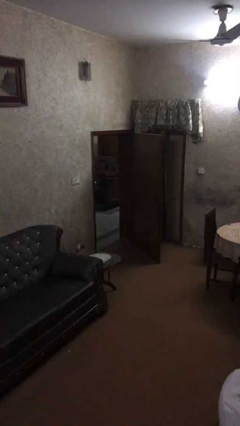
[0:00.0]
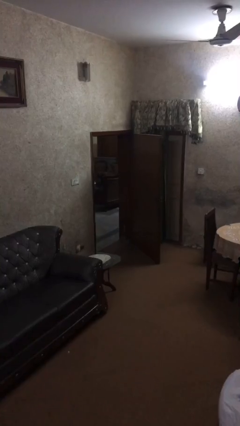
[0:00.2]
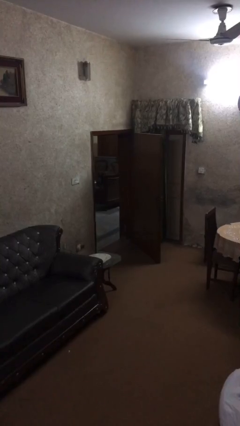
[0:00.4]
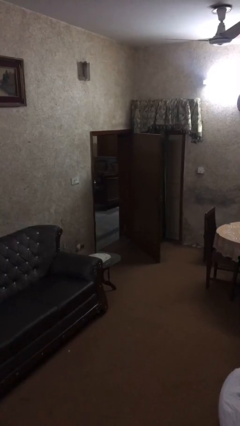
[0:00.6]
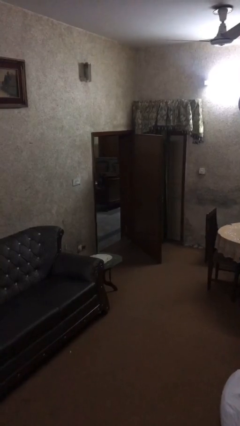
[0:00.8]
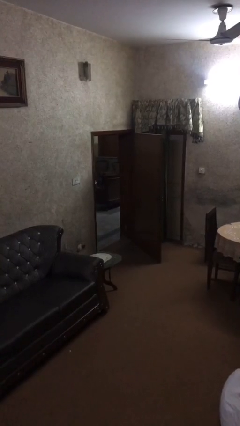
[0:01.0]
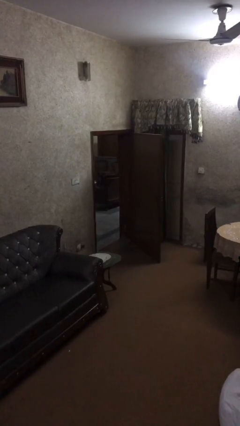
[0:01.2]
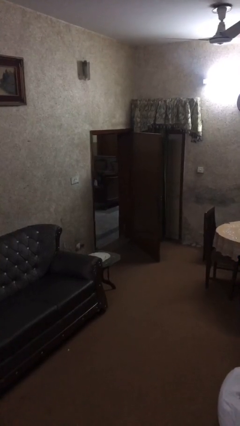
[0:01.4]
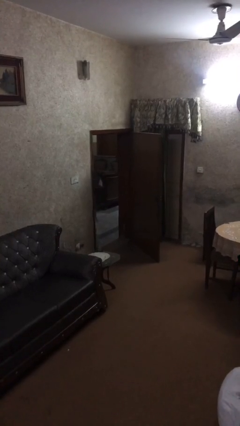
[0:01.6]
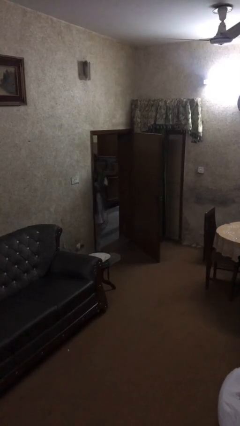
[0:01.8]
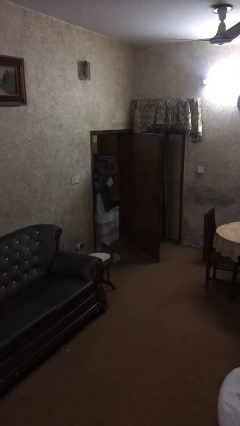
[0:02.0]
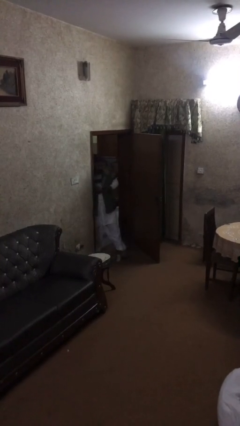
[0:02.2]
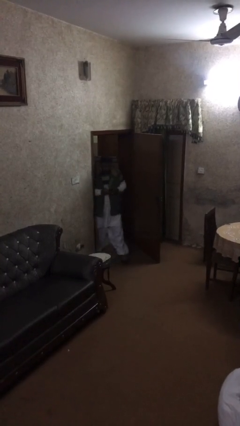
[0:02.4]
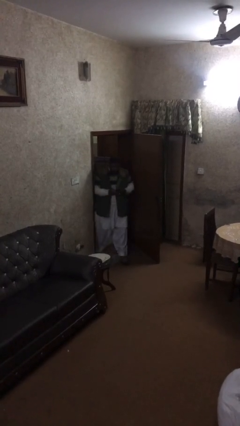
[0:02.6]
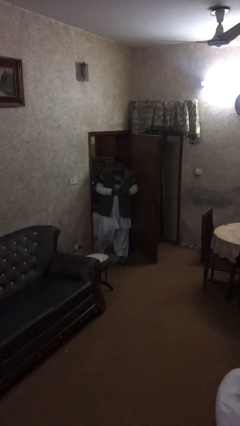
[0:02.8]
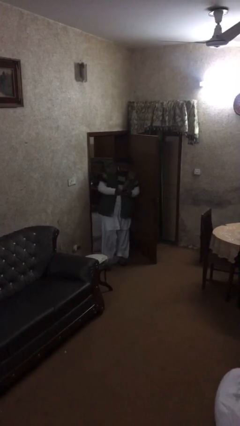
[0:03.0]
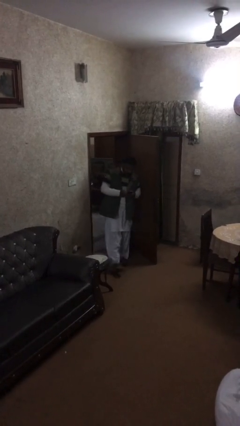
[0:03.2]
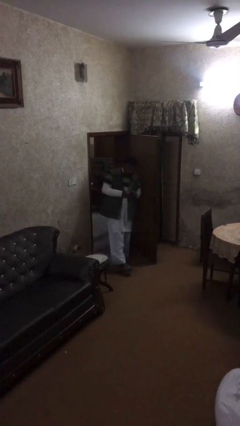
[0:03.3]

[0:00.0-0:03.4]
person enters scene through structure

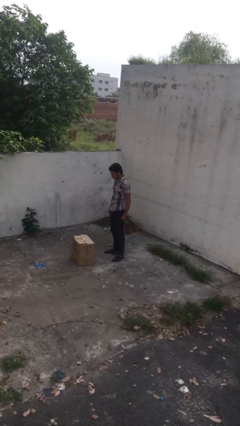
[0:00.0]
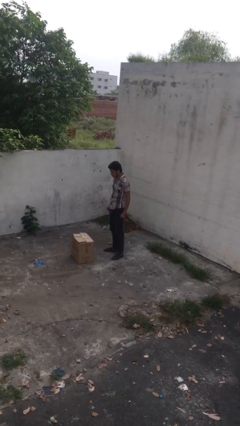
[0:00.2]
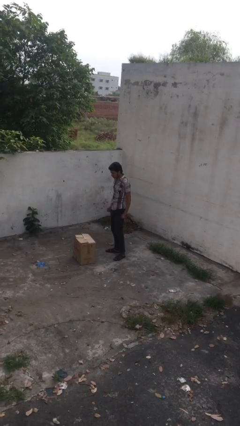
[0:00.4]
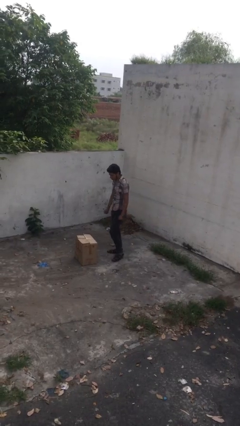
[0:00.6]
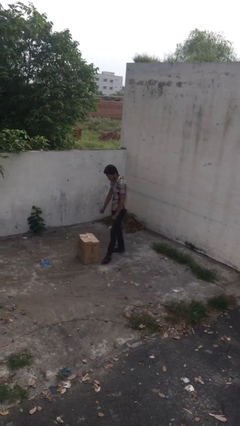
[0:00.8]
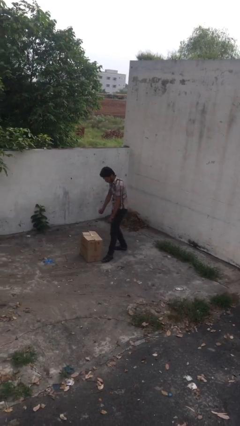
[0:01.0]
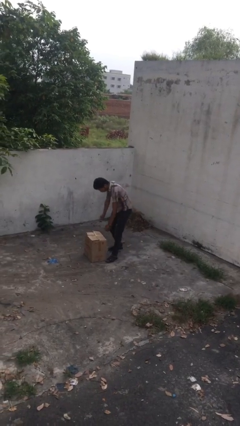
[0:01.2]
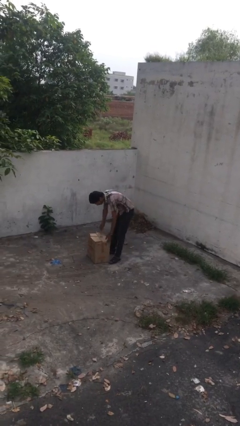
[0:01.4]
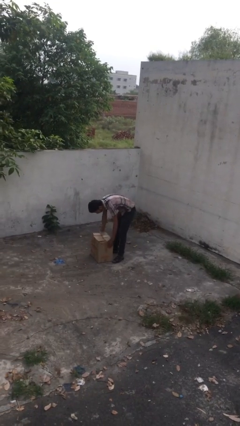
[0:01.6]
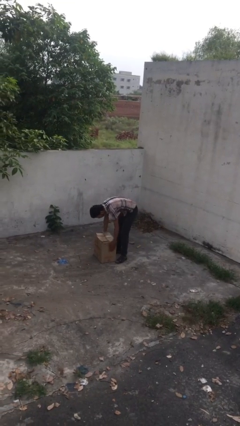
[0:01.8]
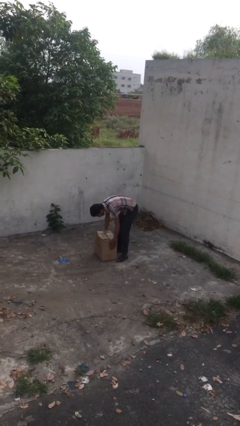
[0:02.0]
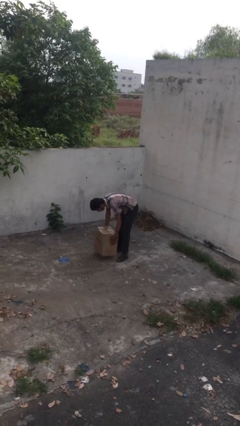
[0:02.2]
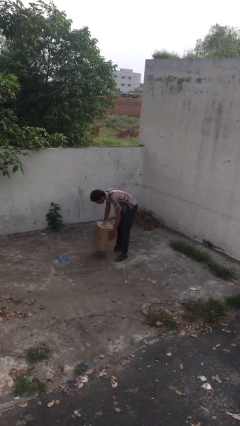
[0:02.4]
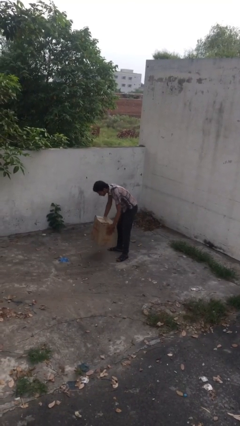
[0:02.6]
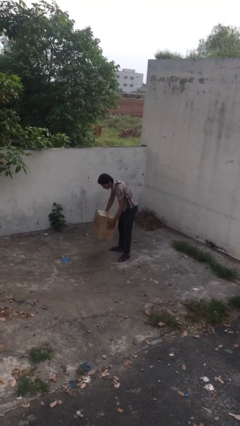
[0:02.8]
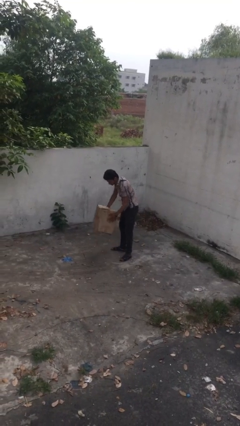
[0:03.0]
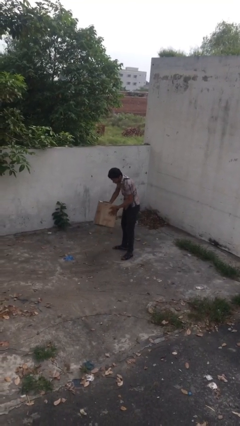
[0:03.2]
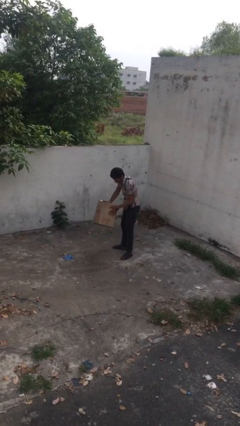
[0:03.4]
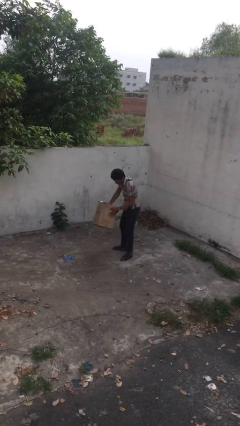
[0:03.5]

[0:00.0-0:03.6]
person picks up object from floor

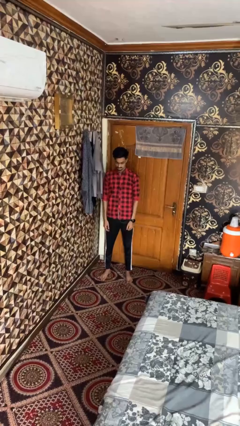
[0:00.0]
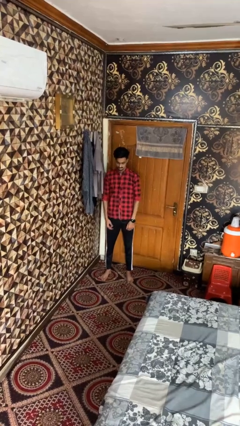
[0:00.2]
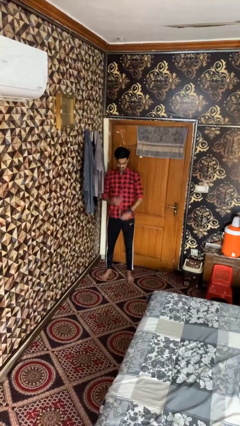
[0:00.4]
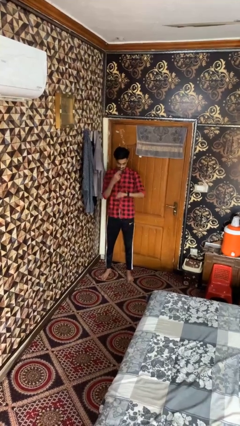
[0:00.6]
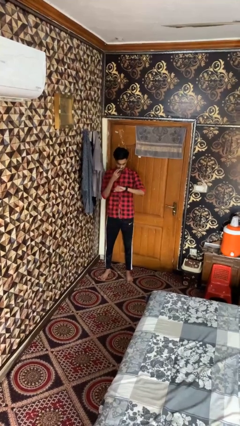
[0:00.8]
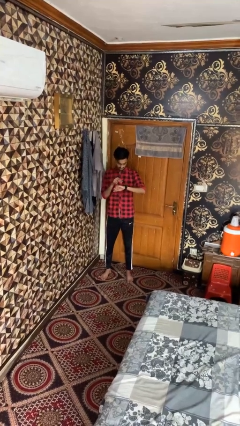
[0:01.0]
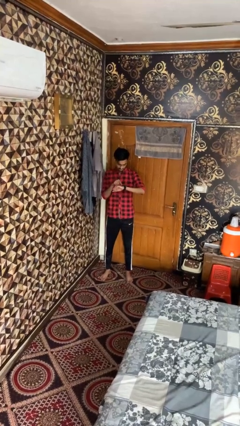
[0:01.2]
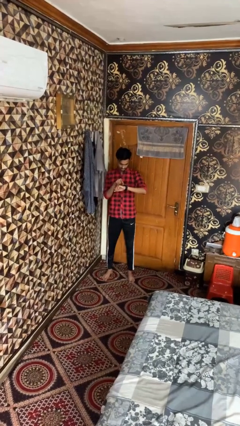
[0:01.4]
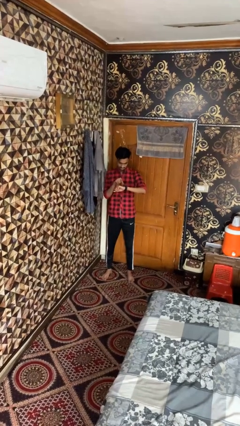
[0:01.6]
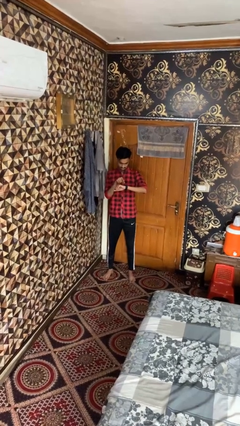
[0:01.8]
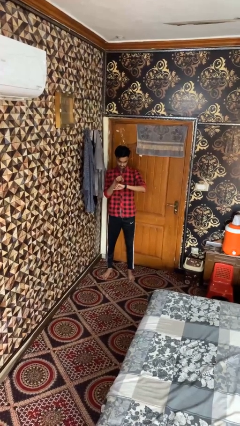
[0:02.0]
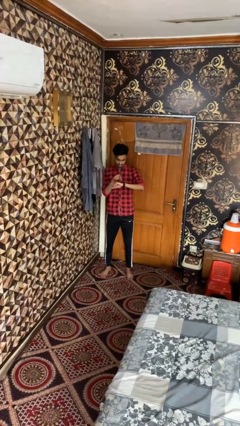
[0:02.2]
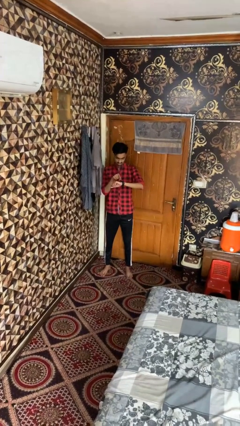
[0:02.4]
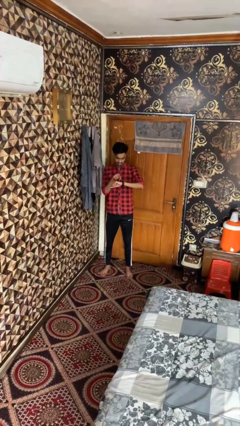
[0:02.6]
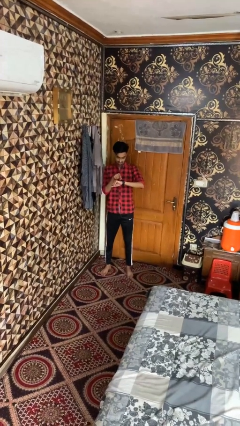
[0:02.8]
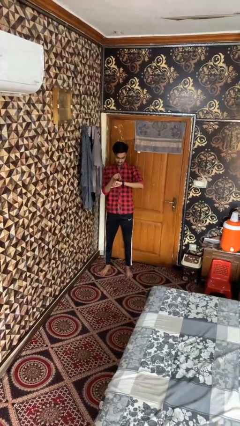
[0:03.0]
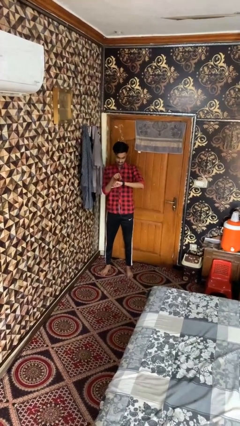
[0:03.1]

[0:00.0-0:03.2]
person gestures watch closely

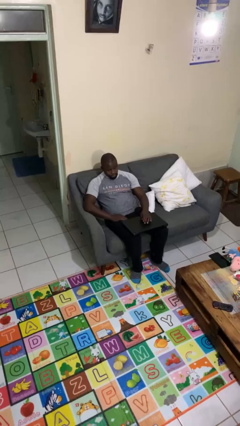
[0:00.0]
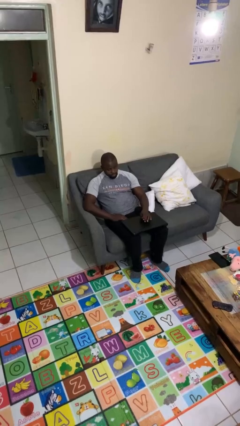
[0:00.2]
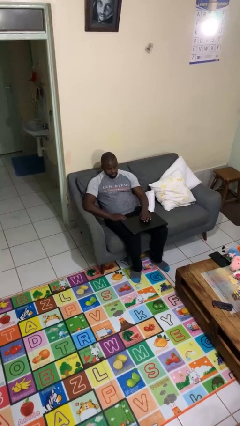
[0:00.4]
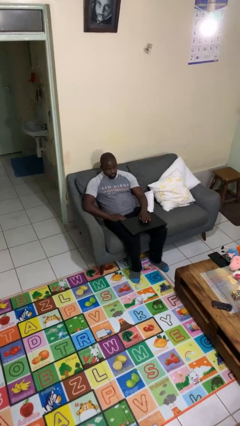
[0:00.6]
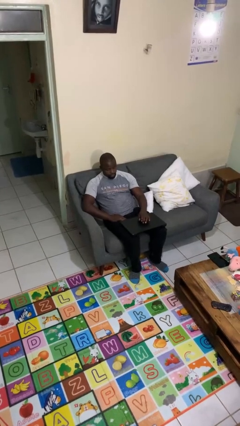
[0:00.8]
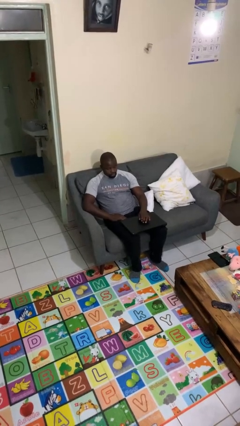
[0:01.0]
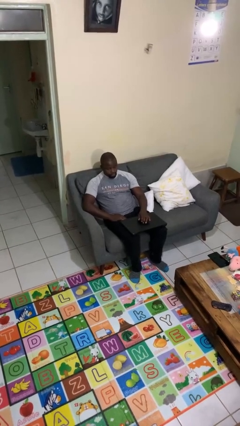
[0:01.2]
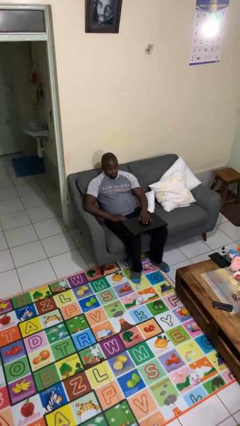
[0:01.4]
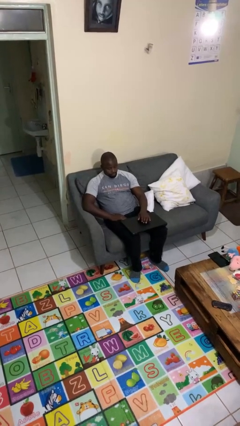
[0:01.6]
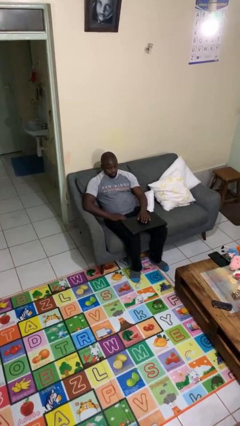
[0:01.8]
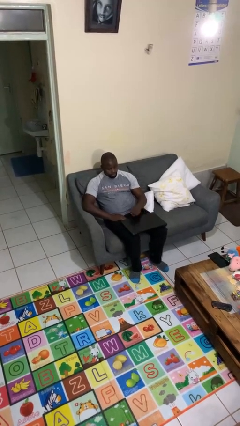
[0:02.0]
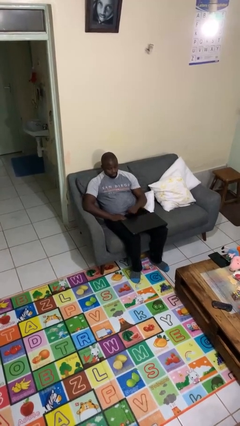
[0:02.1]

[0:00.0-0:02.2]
person taps object with finger

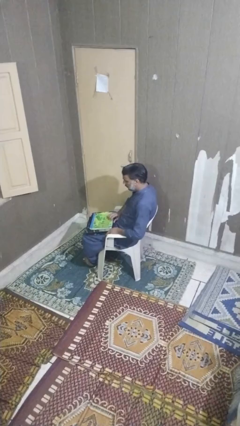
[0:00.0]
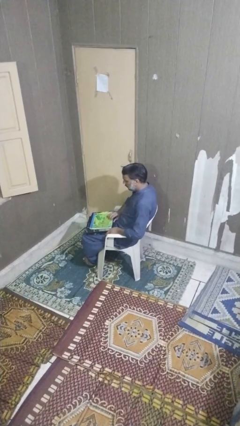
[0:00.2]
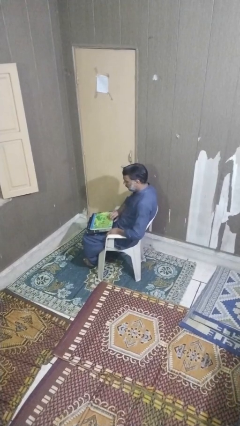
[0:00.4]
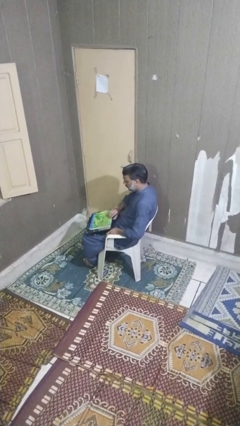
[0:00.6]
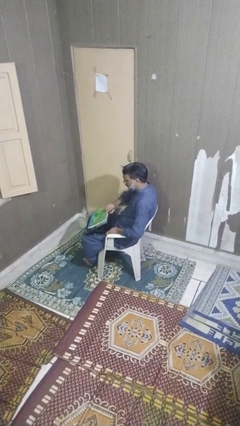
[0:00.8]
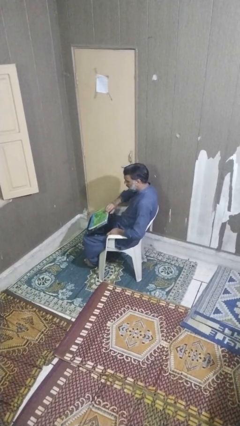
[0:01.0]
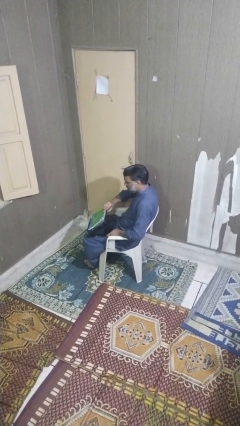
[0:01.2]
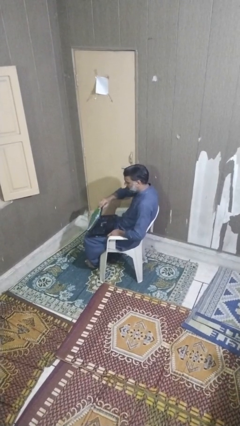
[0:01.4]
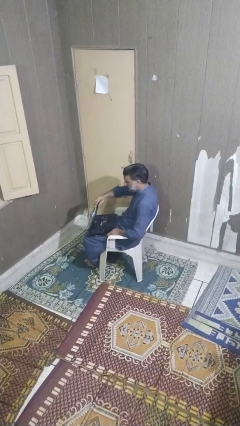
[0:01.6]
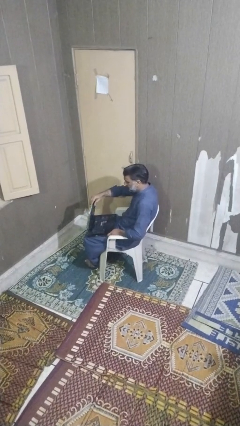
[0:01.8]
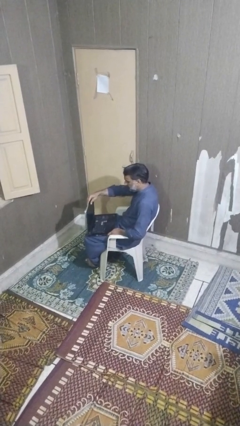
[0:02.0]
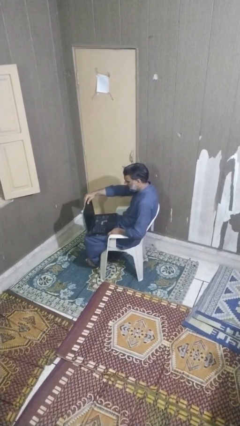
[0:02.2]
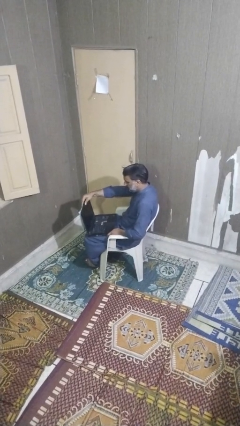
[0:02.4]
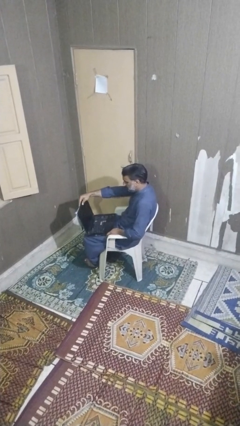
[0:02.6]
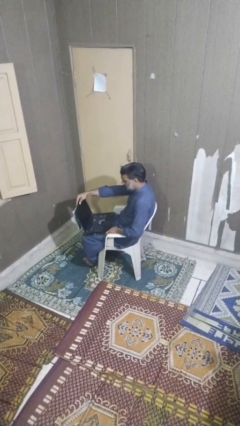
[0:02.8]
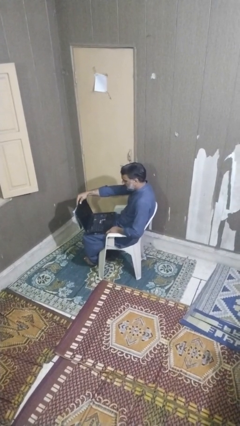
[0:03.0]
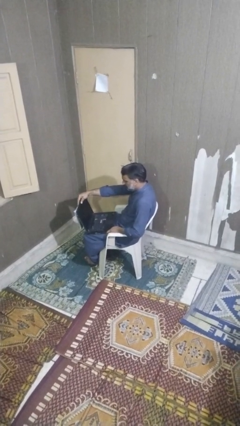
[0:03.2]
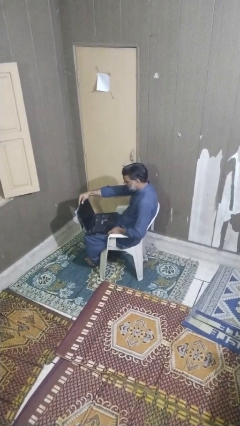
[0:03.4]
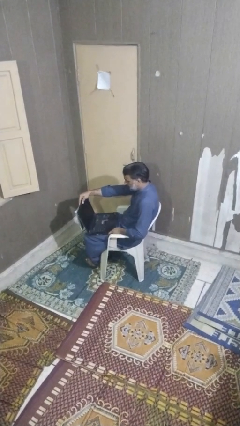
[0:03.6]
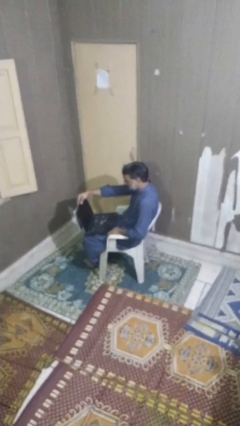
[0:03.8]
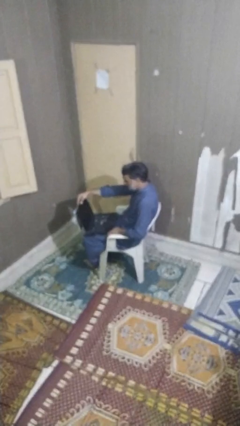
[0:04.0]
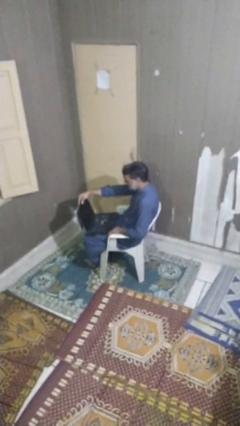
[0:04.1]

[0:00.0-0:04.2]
person opens laptop

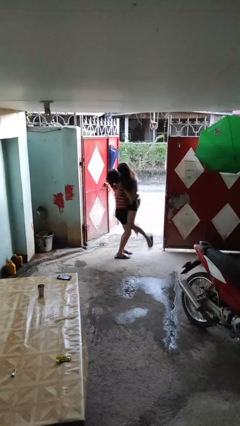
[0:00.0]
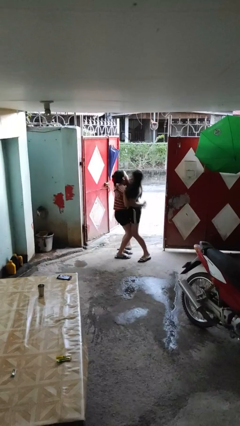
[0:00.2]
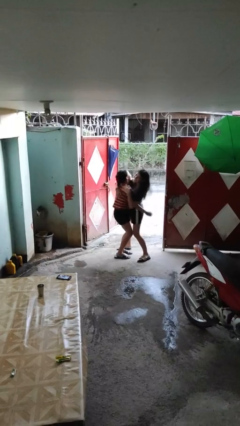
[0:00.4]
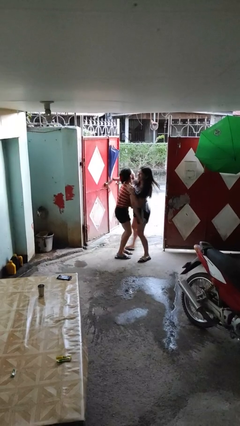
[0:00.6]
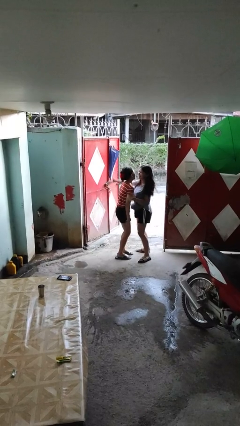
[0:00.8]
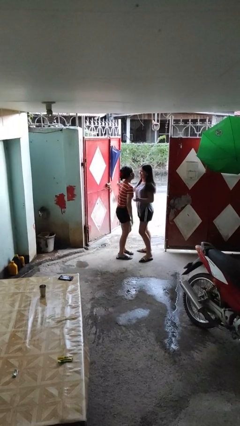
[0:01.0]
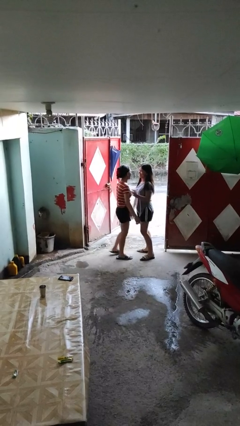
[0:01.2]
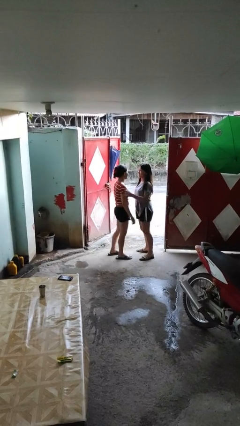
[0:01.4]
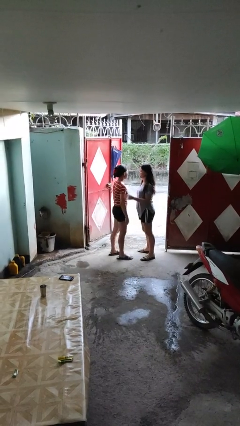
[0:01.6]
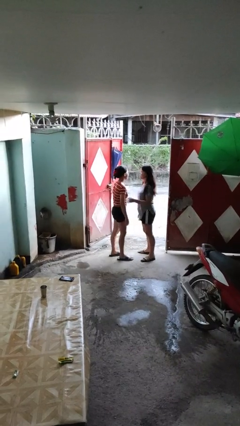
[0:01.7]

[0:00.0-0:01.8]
person puts down person
